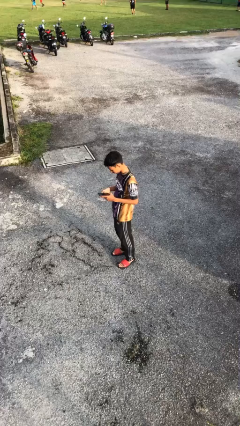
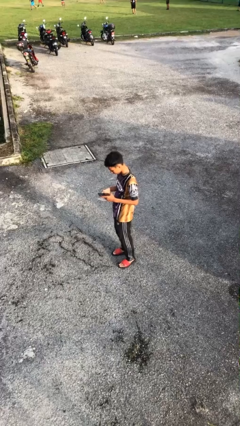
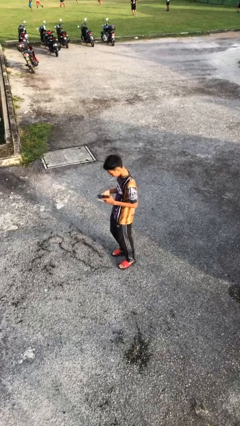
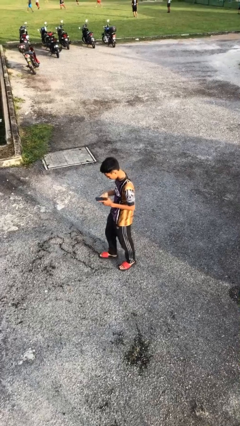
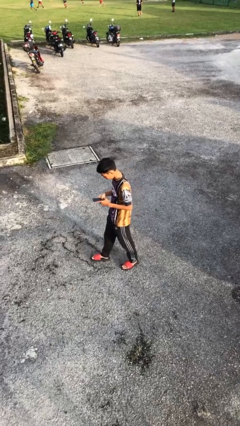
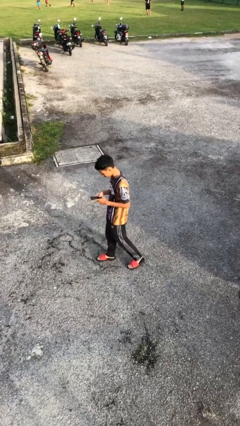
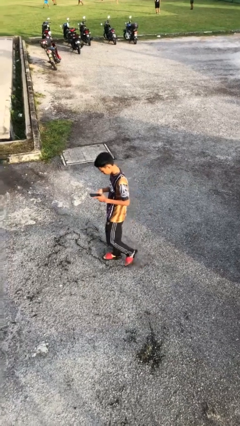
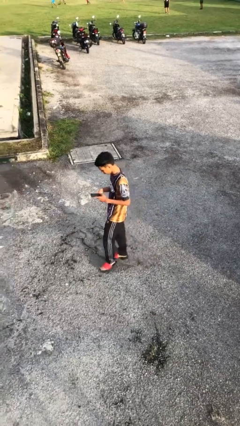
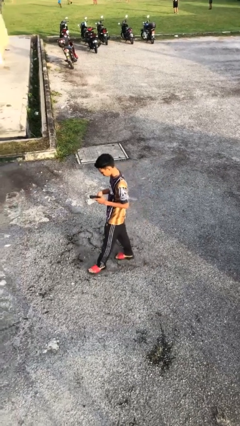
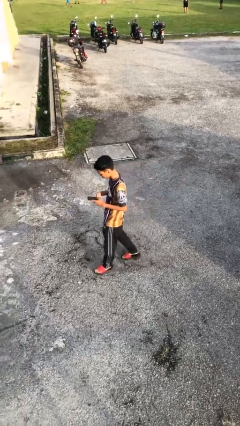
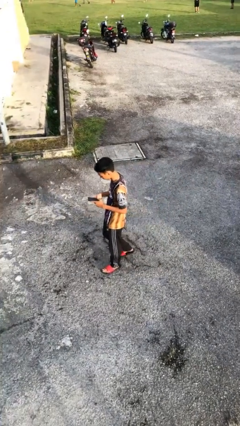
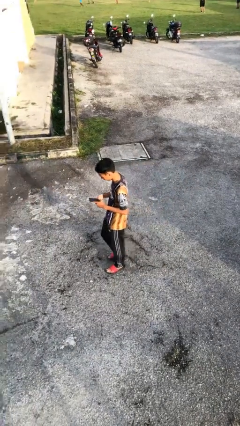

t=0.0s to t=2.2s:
person texts on phone

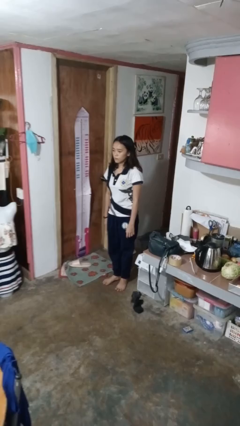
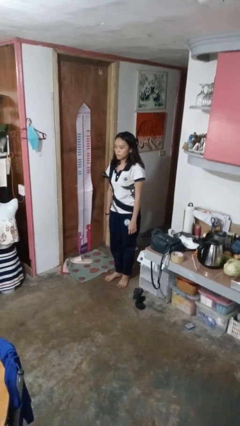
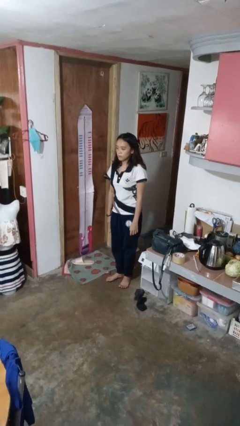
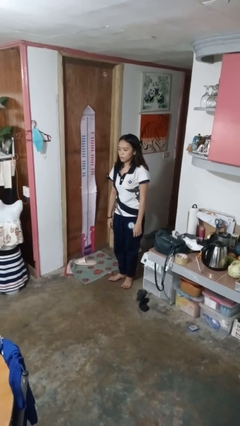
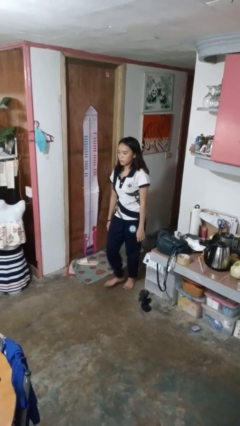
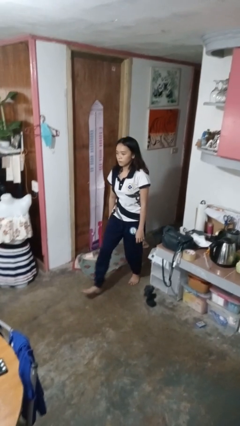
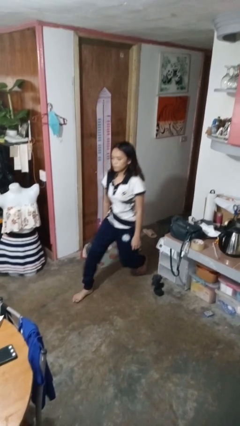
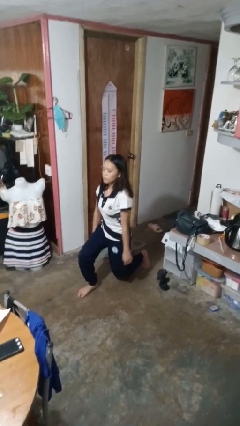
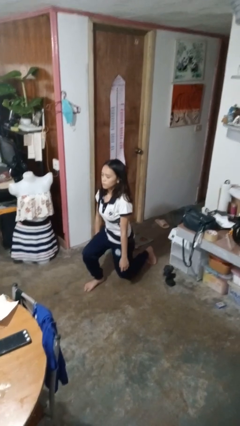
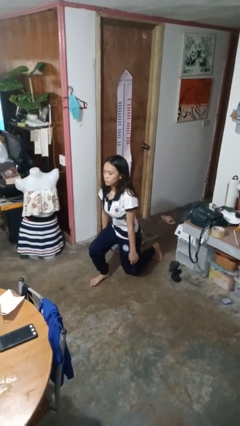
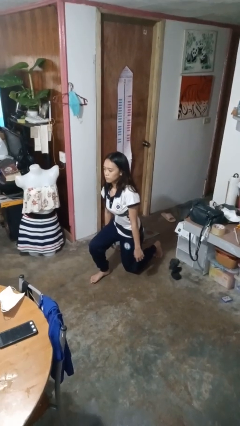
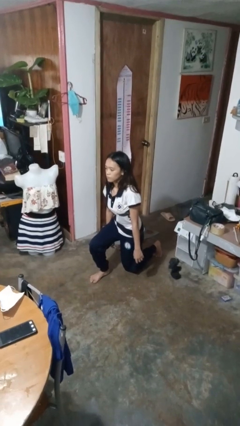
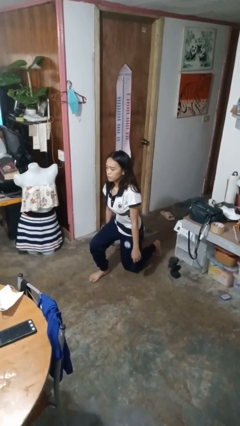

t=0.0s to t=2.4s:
person kneels

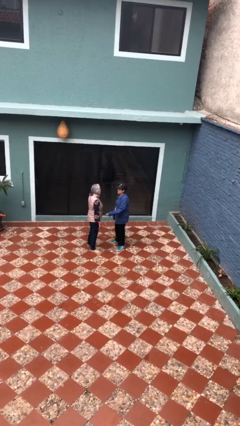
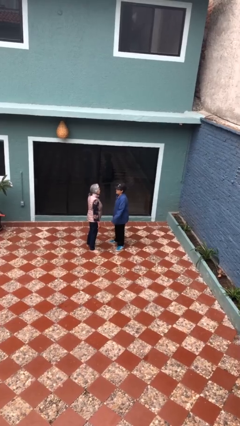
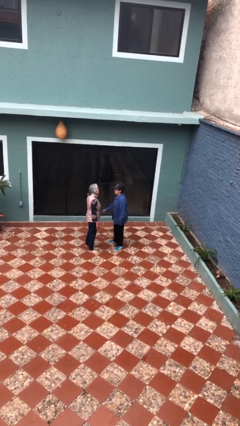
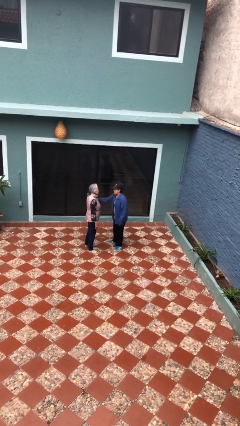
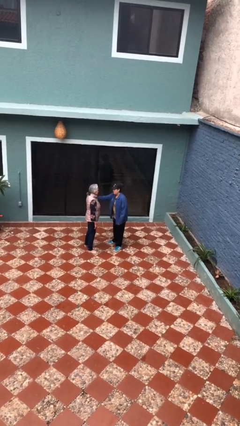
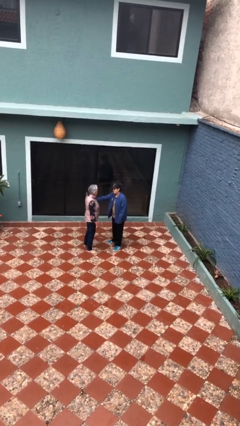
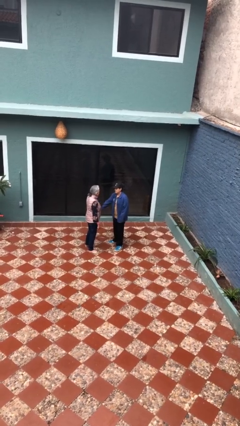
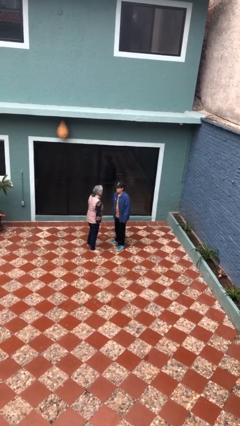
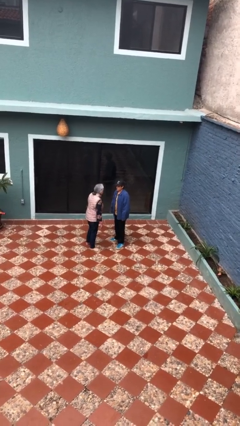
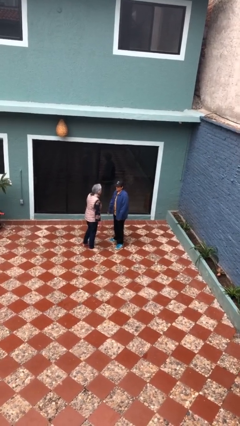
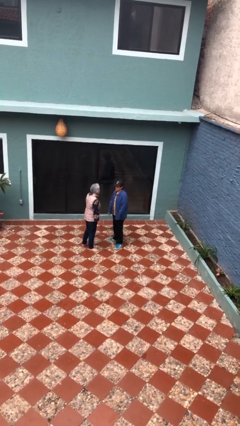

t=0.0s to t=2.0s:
person shoves person

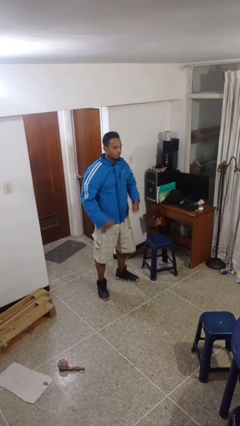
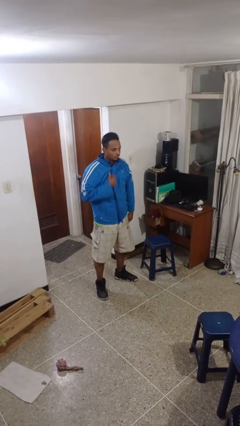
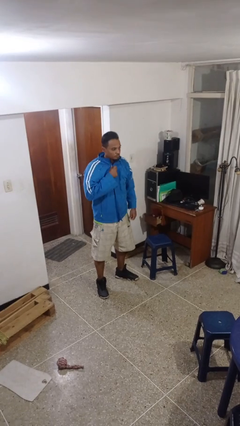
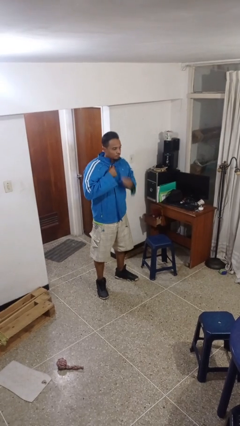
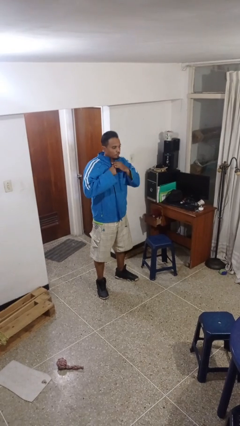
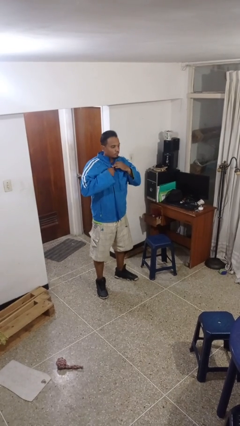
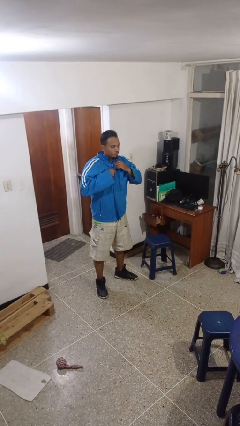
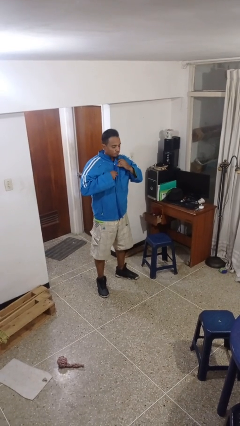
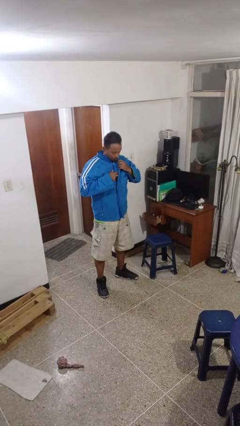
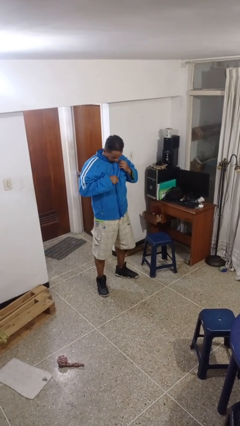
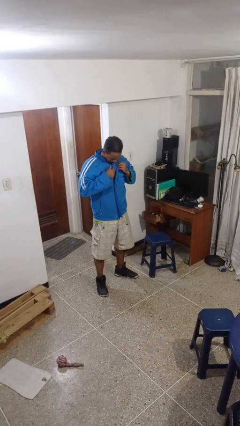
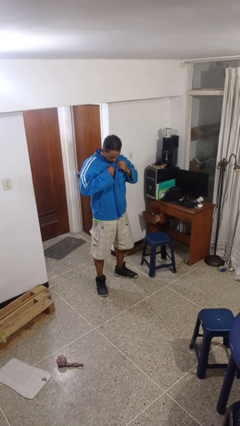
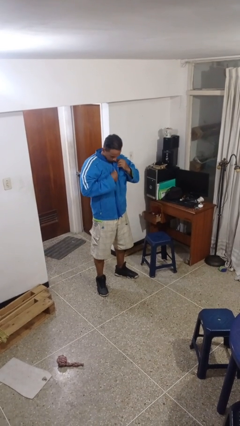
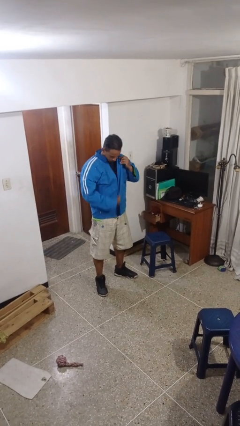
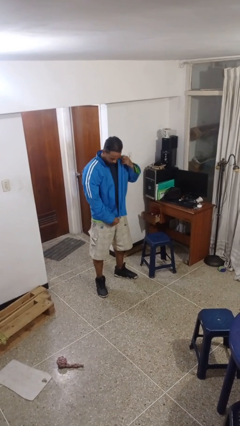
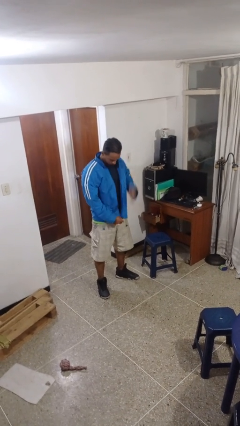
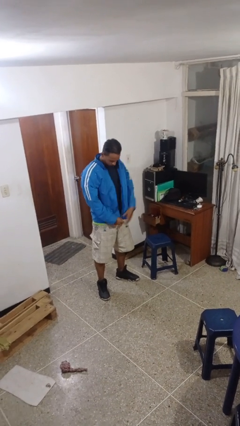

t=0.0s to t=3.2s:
person unzips jacket

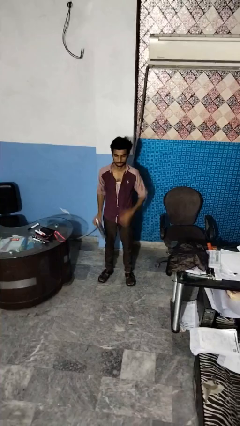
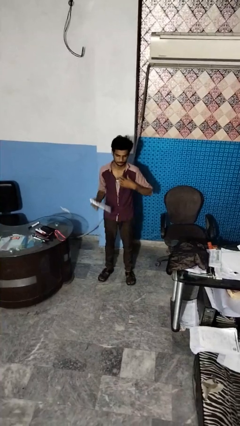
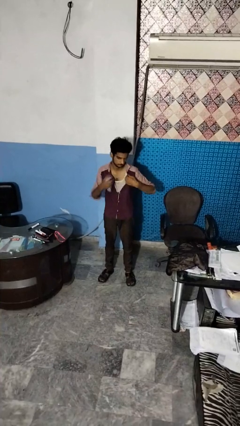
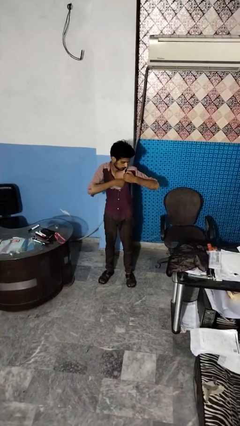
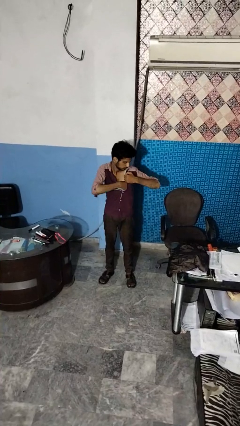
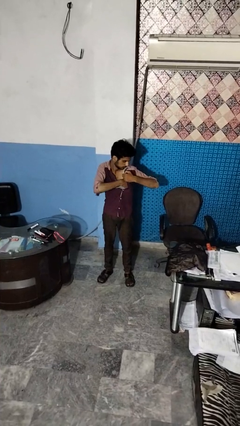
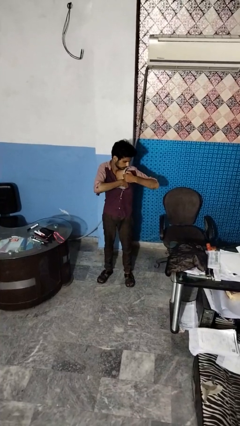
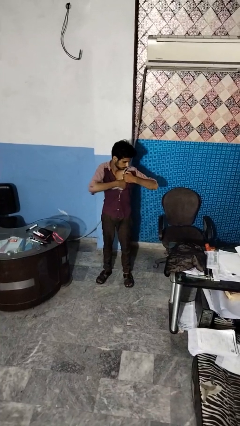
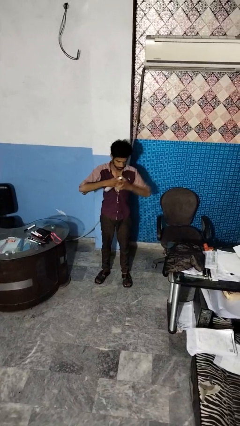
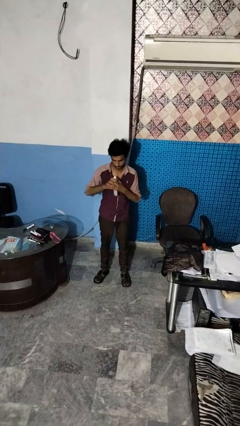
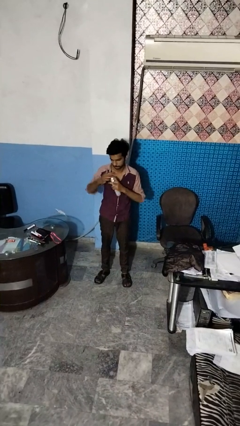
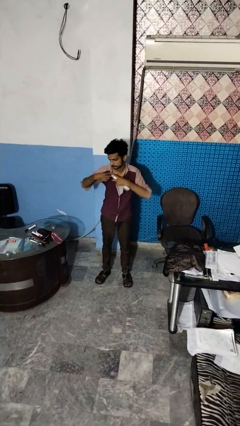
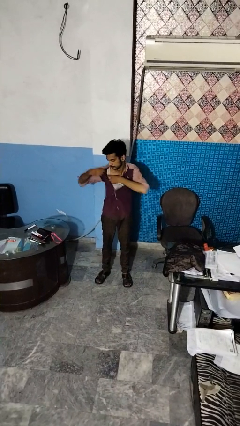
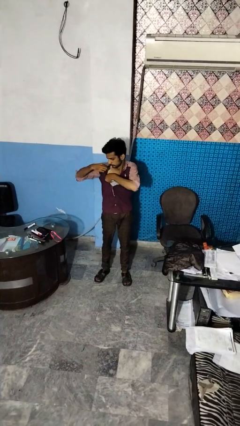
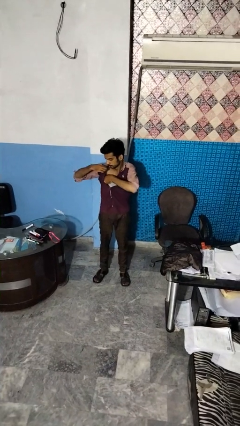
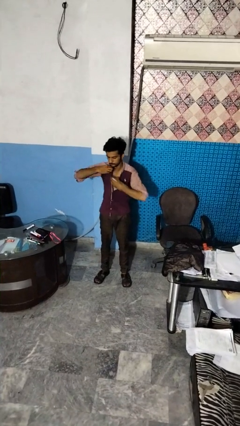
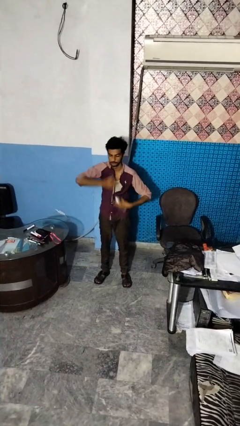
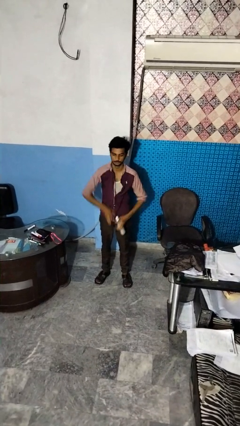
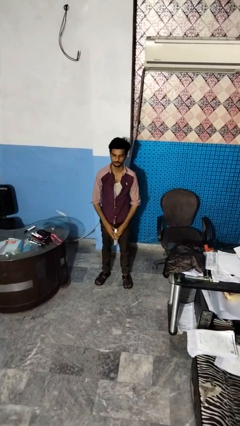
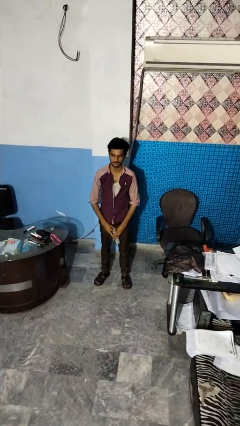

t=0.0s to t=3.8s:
person applies deodorant

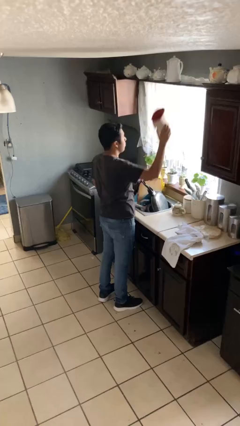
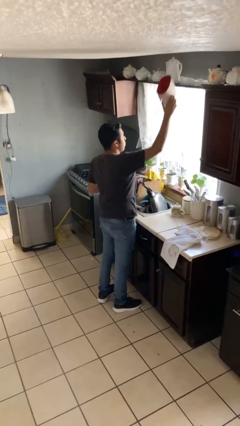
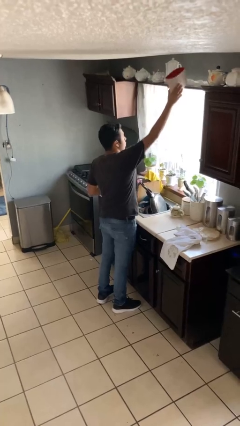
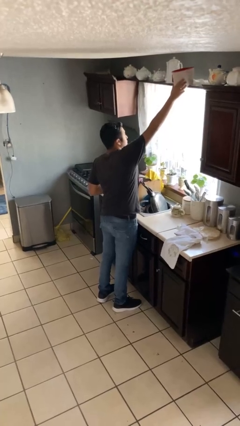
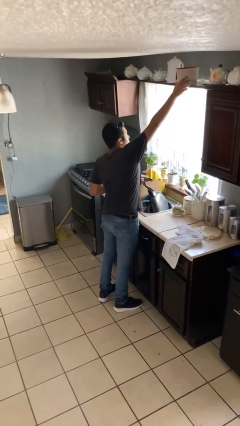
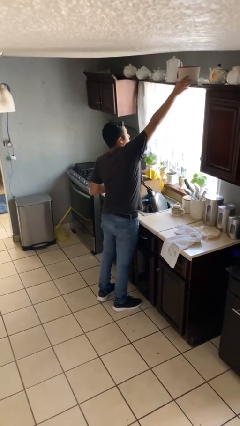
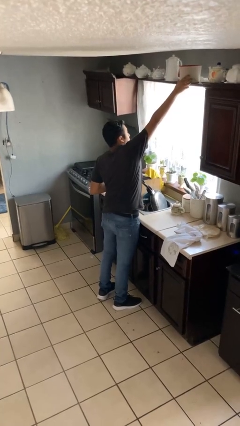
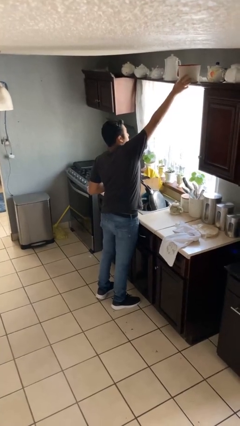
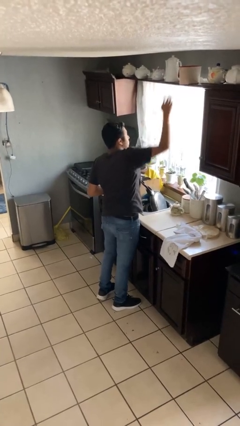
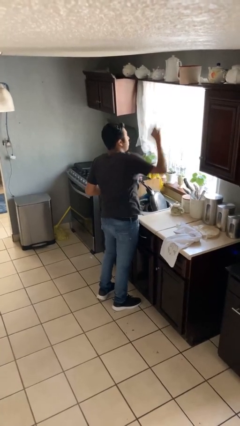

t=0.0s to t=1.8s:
person puts down object on countertop

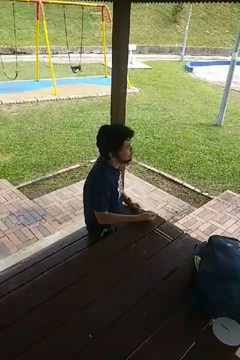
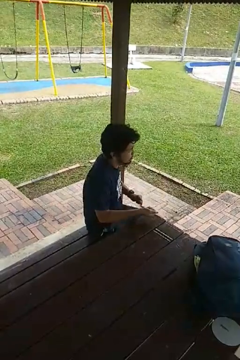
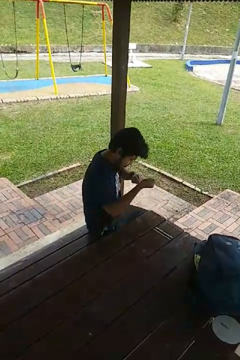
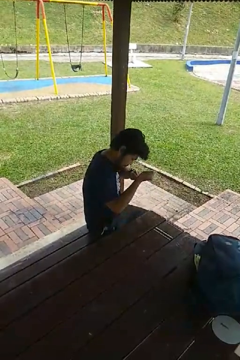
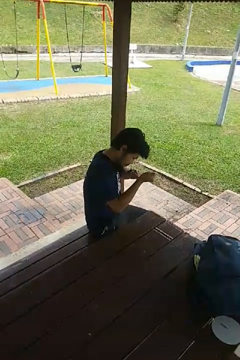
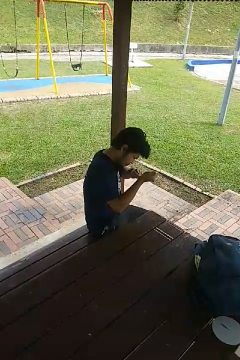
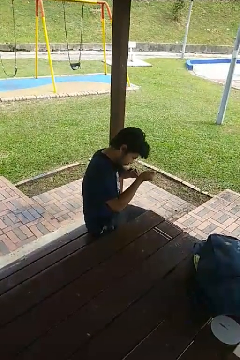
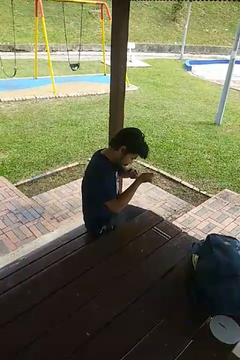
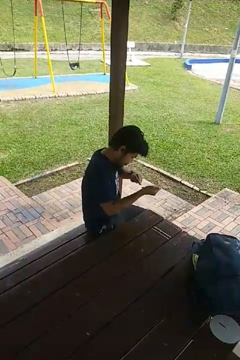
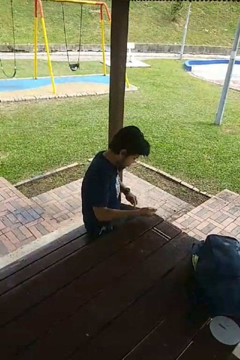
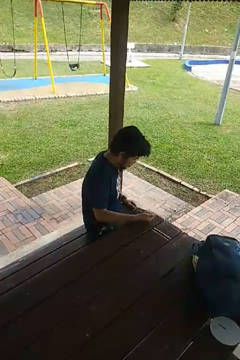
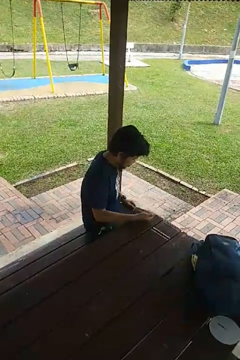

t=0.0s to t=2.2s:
person paints fingernails

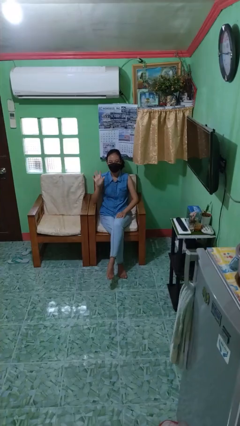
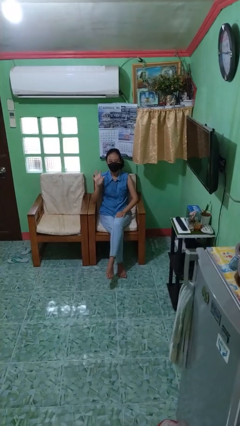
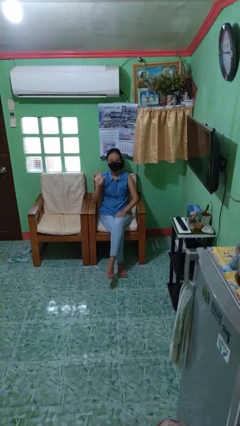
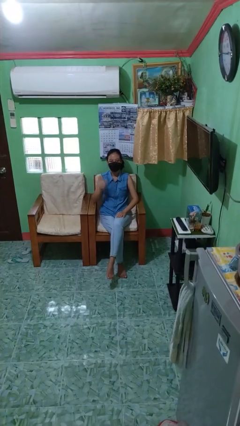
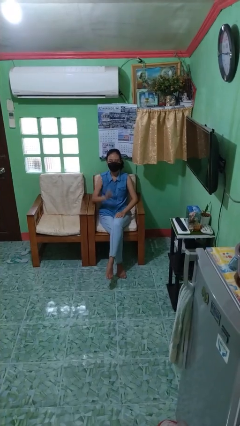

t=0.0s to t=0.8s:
person gestures number five
